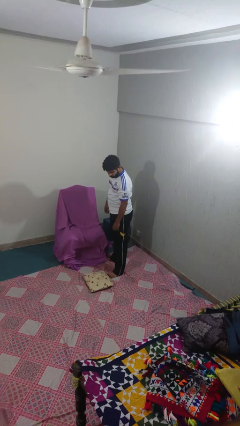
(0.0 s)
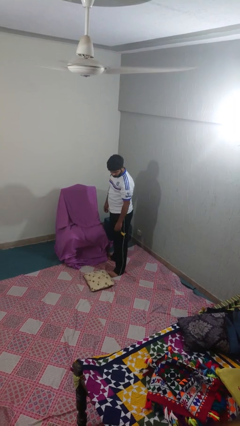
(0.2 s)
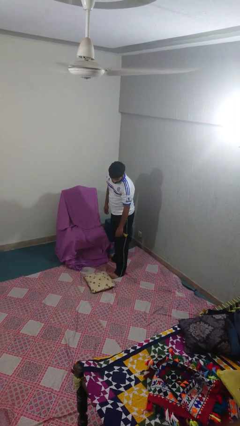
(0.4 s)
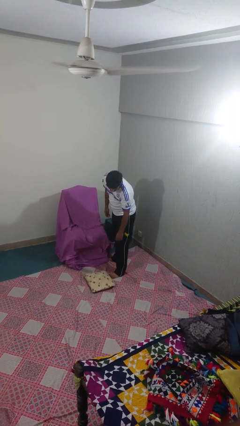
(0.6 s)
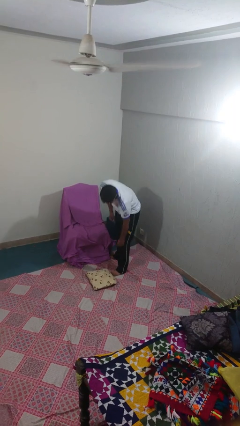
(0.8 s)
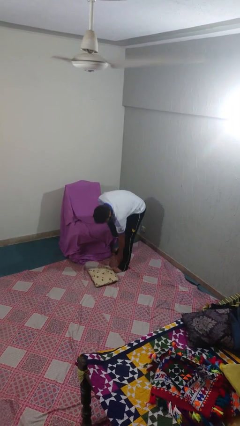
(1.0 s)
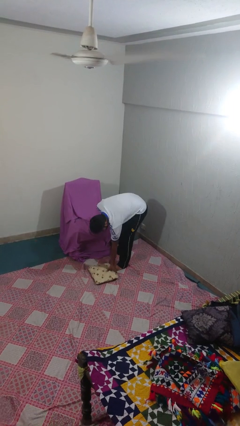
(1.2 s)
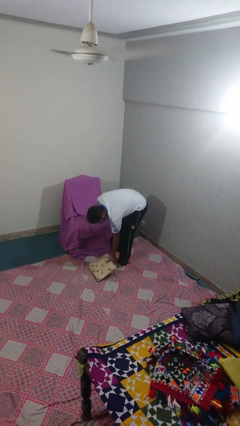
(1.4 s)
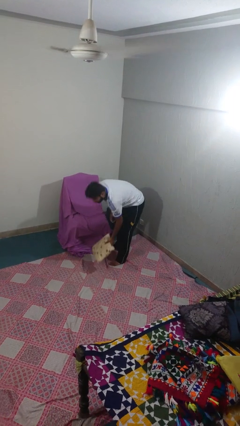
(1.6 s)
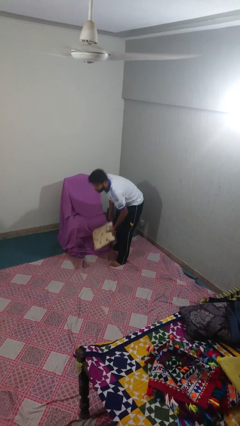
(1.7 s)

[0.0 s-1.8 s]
person picks up object from floor

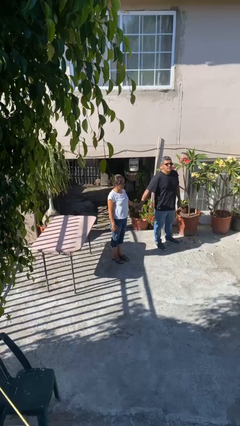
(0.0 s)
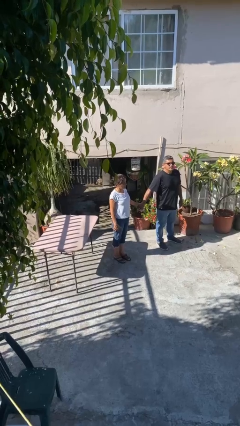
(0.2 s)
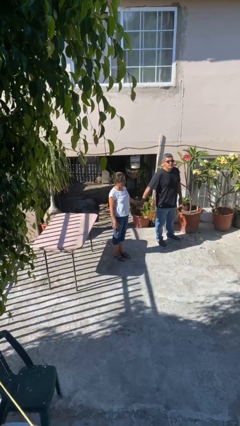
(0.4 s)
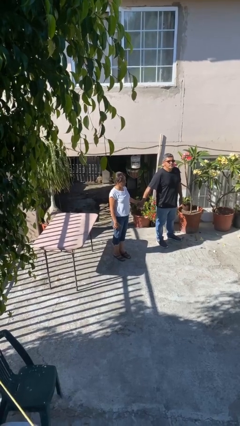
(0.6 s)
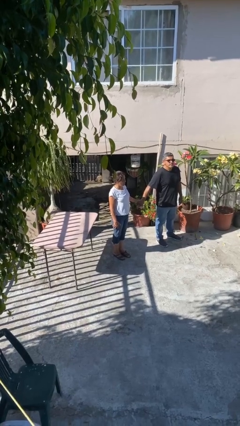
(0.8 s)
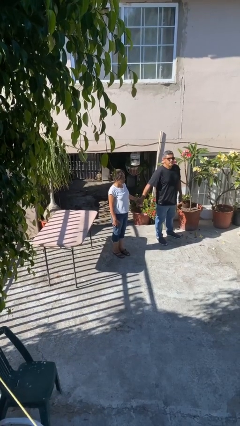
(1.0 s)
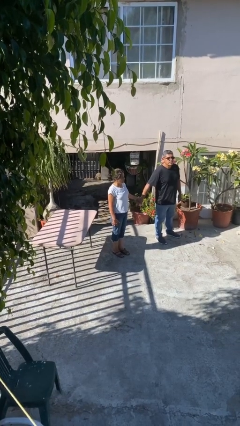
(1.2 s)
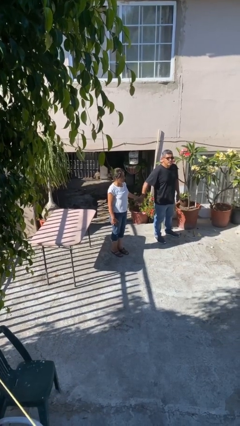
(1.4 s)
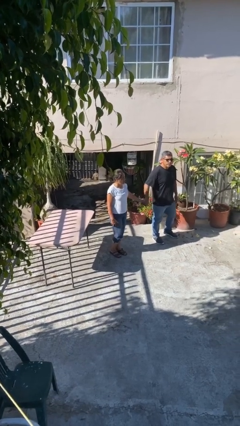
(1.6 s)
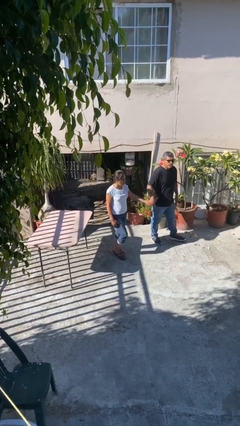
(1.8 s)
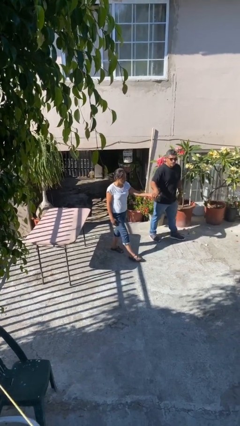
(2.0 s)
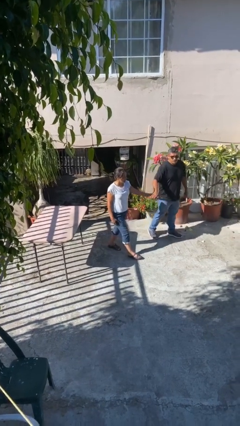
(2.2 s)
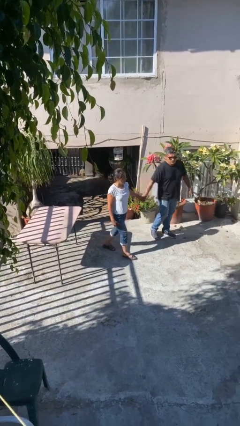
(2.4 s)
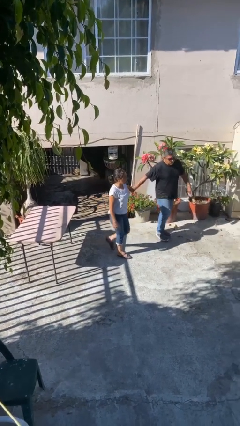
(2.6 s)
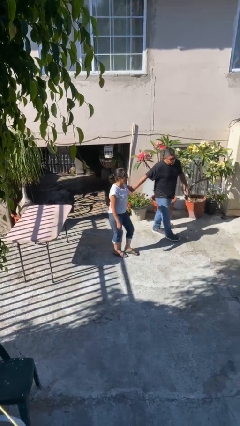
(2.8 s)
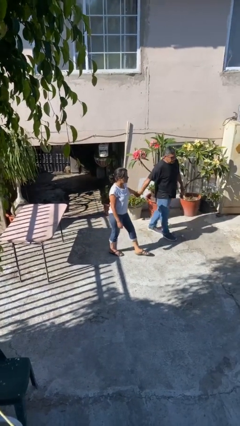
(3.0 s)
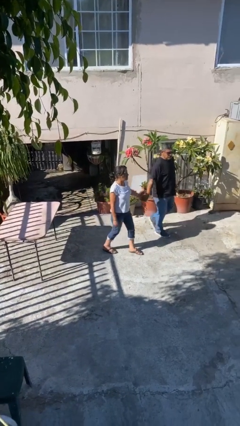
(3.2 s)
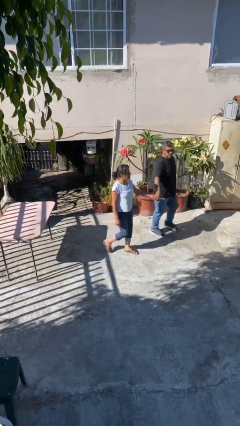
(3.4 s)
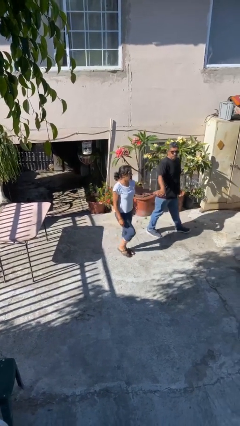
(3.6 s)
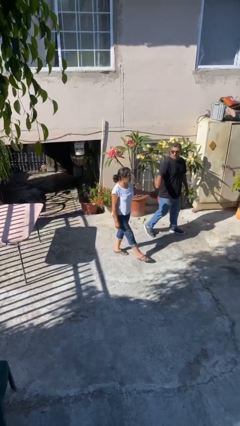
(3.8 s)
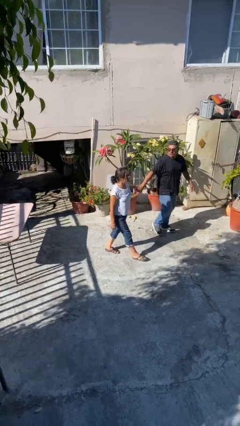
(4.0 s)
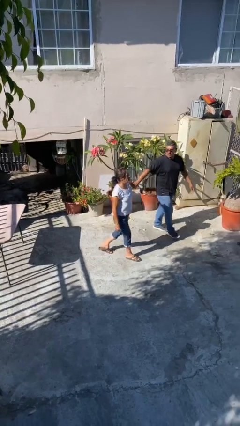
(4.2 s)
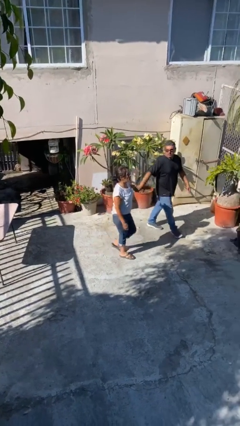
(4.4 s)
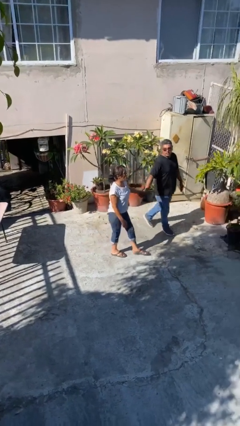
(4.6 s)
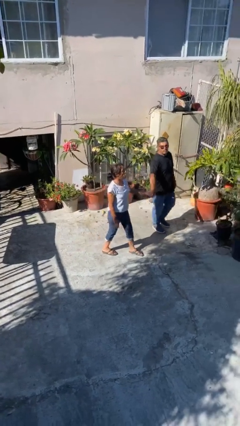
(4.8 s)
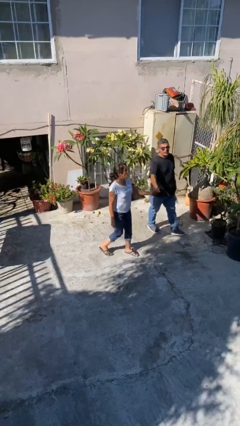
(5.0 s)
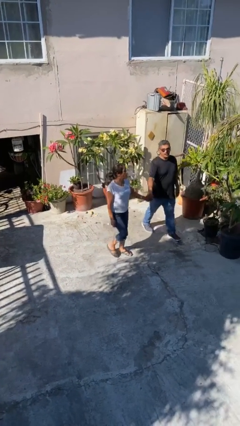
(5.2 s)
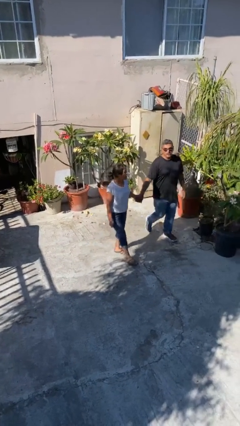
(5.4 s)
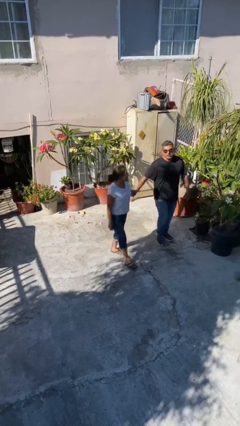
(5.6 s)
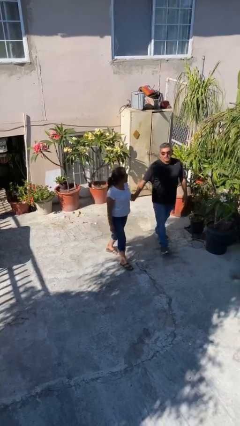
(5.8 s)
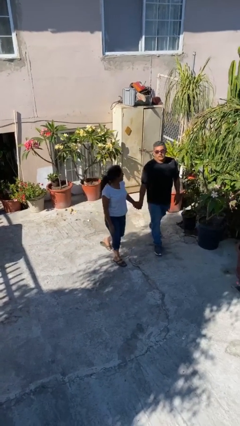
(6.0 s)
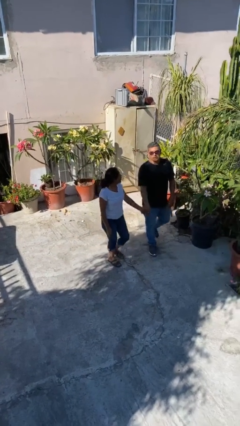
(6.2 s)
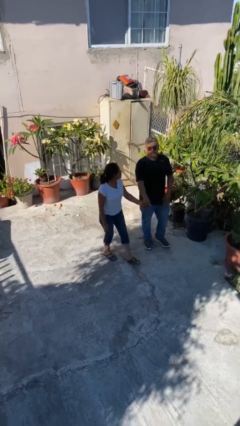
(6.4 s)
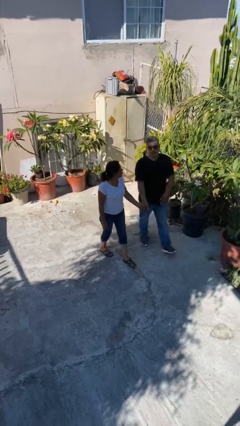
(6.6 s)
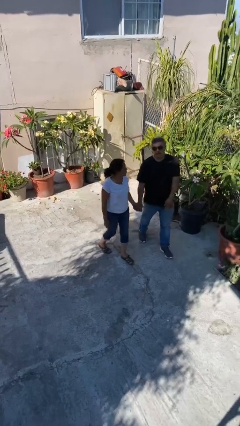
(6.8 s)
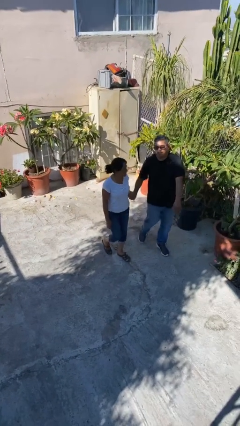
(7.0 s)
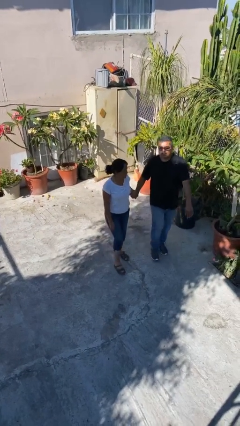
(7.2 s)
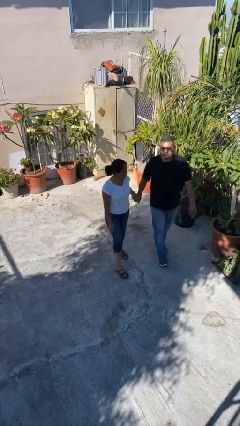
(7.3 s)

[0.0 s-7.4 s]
person holds hand

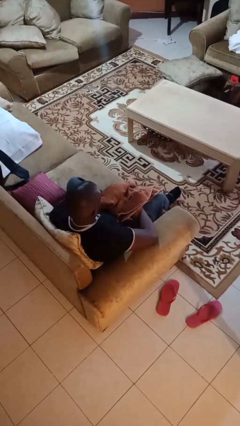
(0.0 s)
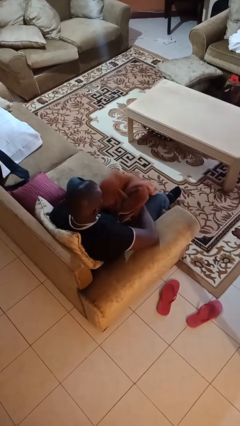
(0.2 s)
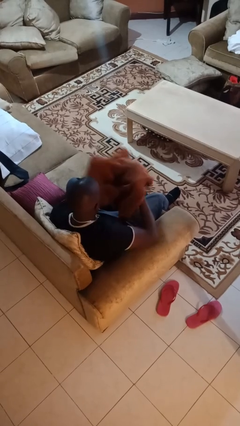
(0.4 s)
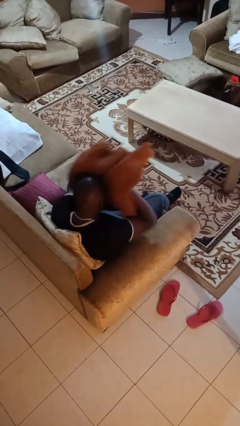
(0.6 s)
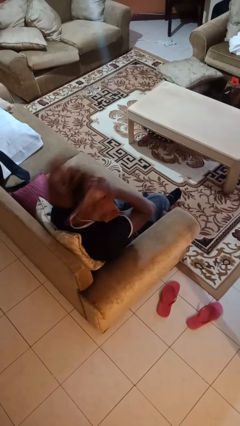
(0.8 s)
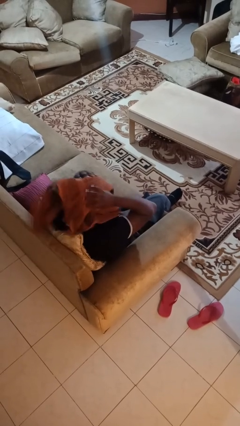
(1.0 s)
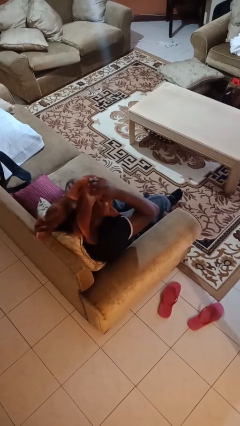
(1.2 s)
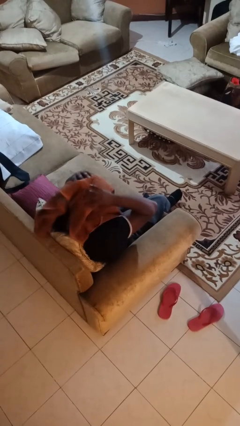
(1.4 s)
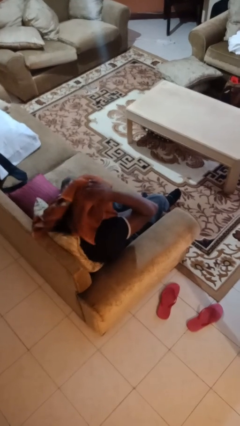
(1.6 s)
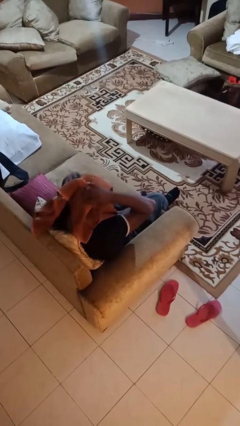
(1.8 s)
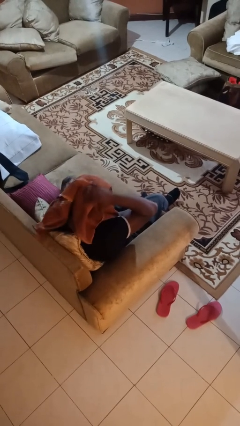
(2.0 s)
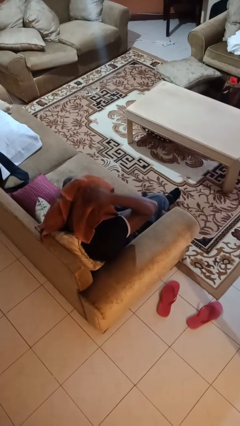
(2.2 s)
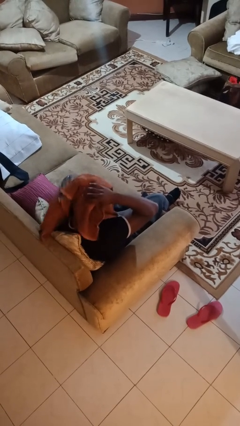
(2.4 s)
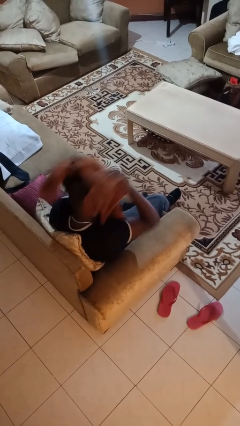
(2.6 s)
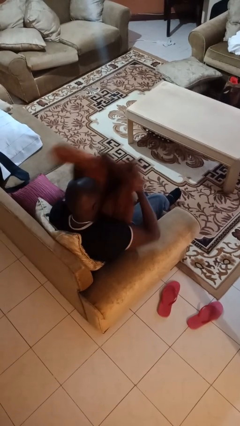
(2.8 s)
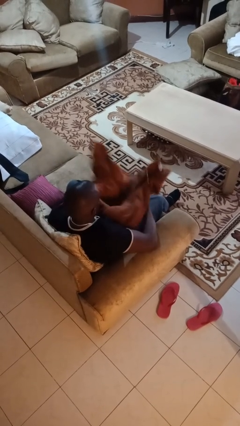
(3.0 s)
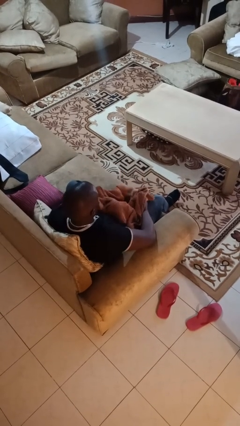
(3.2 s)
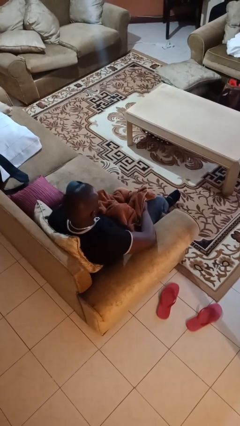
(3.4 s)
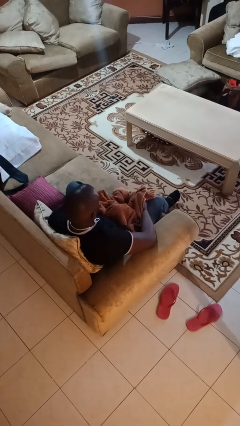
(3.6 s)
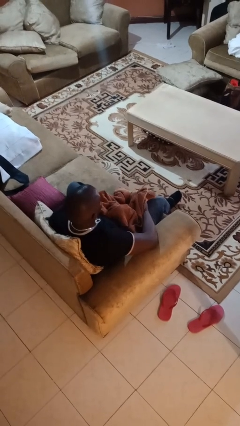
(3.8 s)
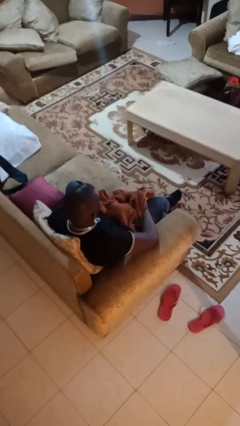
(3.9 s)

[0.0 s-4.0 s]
person dries hair with towel

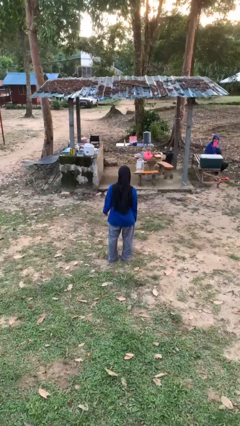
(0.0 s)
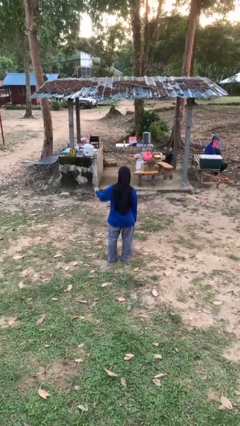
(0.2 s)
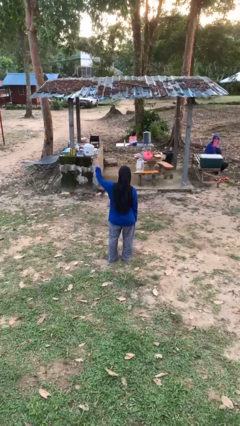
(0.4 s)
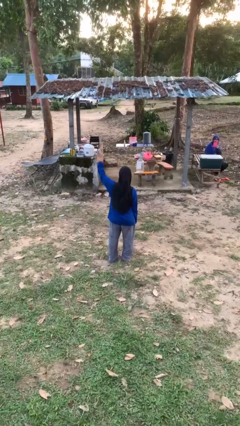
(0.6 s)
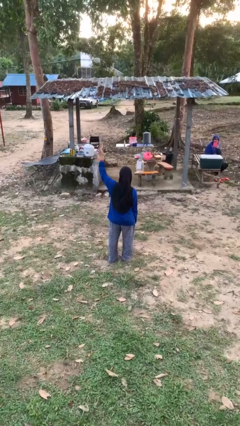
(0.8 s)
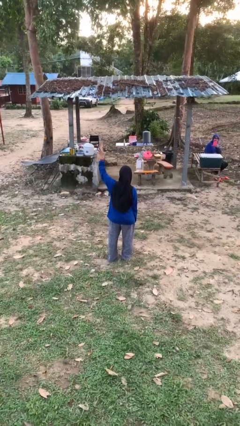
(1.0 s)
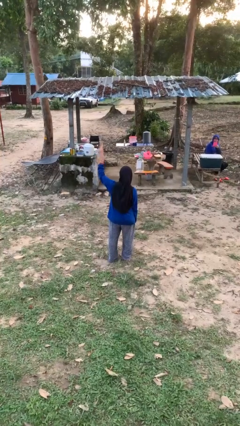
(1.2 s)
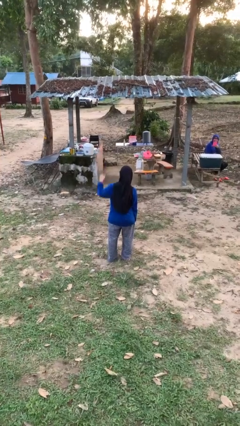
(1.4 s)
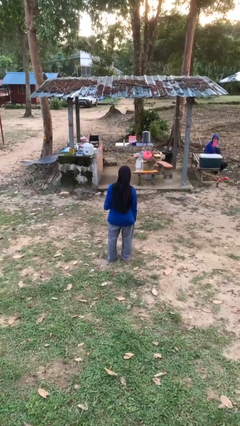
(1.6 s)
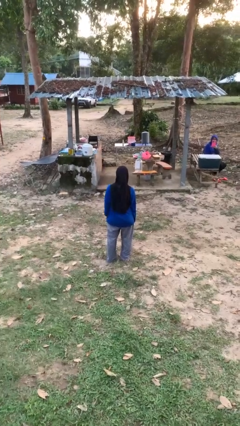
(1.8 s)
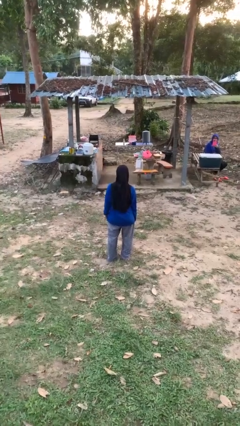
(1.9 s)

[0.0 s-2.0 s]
person gestures number five

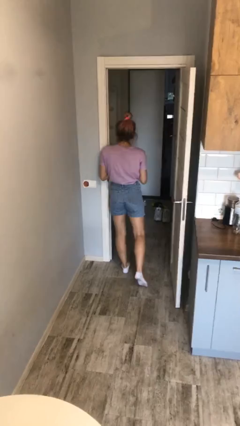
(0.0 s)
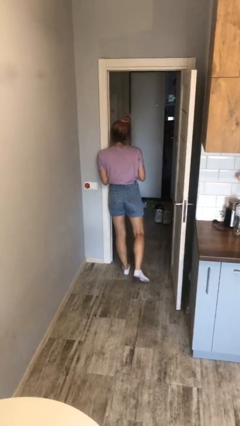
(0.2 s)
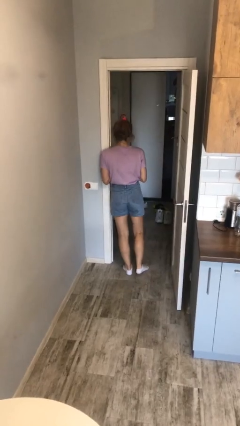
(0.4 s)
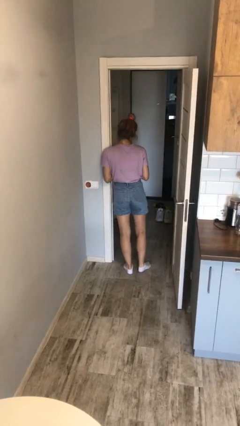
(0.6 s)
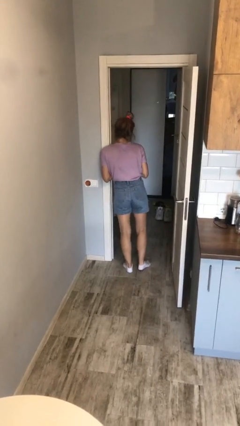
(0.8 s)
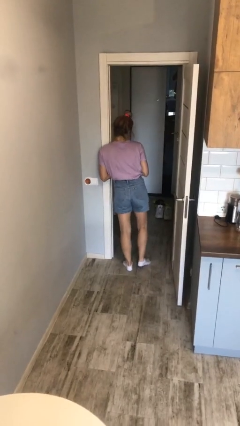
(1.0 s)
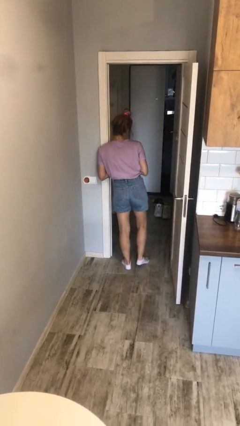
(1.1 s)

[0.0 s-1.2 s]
person bumps into wall

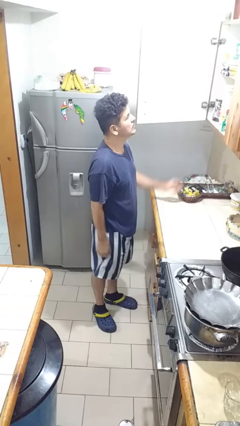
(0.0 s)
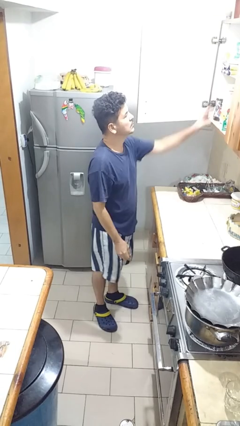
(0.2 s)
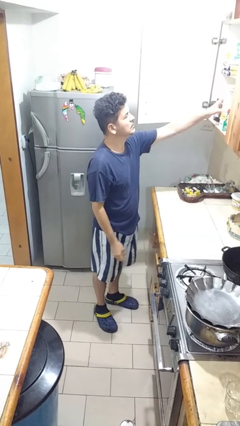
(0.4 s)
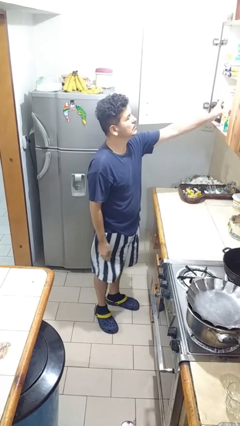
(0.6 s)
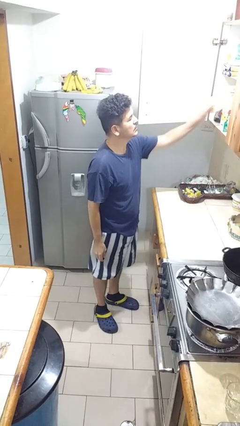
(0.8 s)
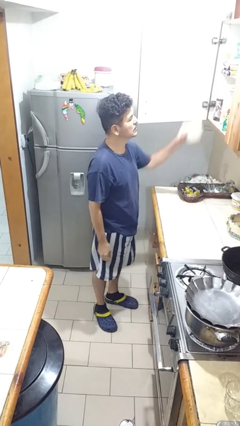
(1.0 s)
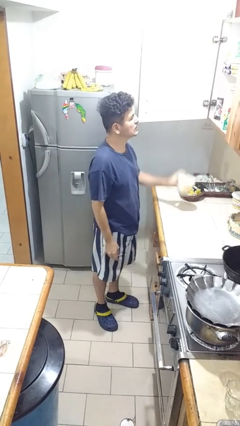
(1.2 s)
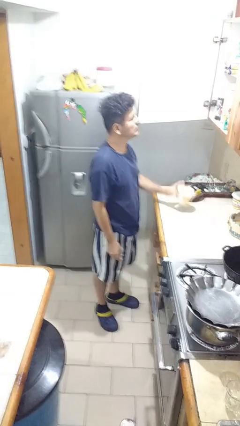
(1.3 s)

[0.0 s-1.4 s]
person takes object from cabinet
